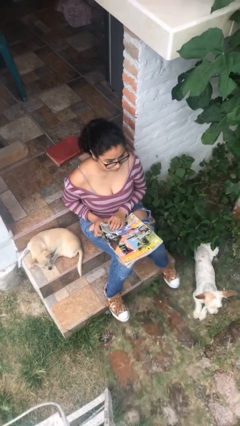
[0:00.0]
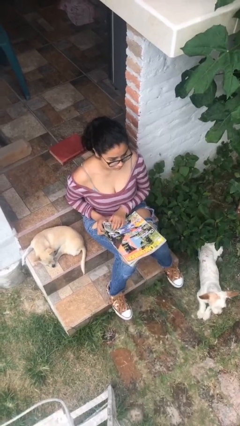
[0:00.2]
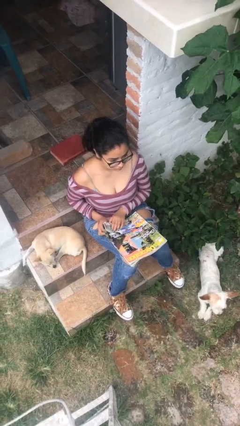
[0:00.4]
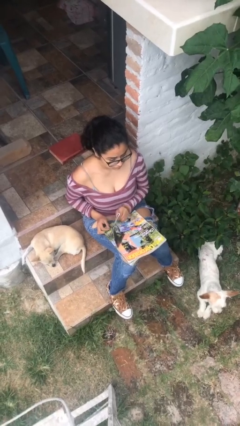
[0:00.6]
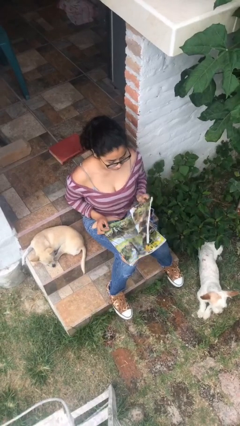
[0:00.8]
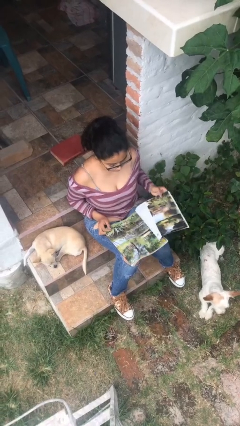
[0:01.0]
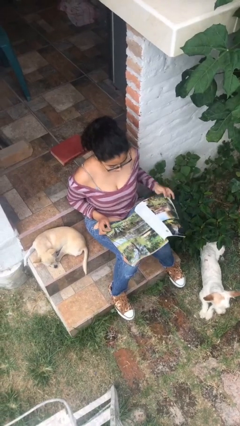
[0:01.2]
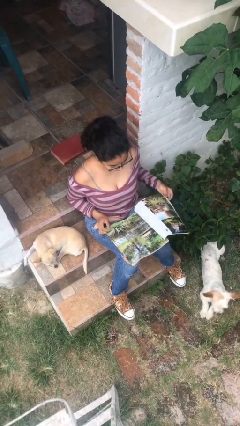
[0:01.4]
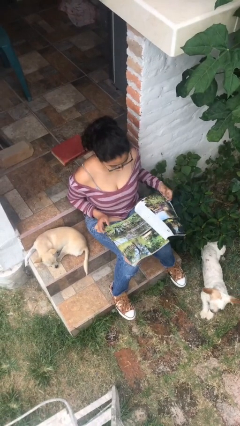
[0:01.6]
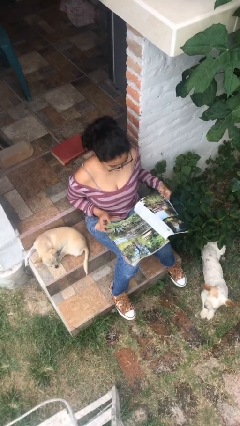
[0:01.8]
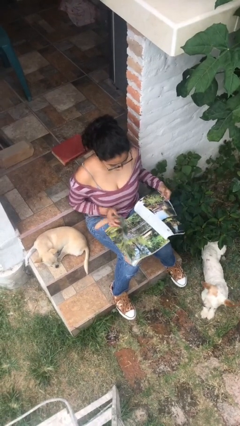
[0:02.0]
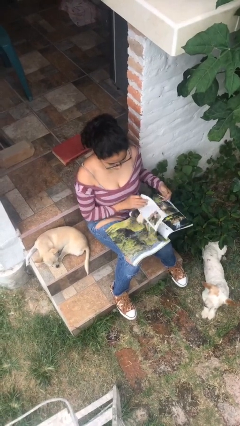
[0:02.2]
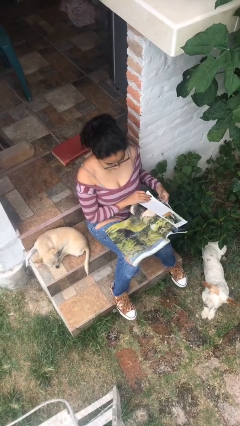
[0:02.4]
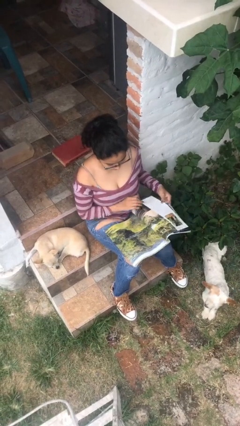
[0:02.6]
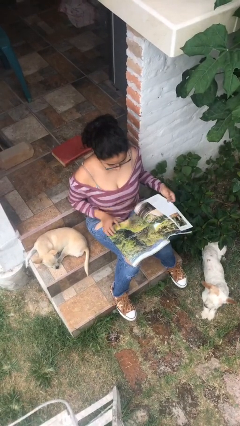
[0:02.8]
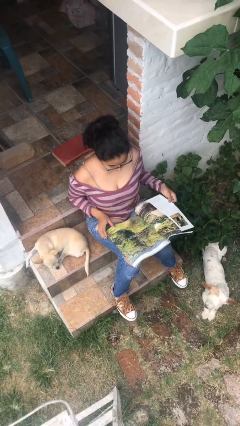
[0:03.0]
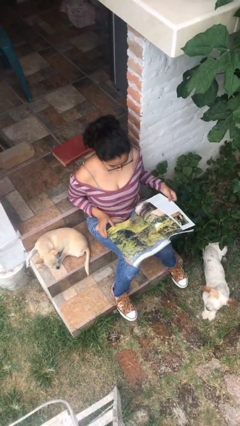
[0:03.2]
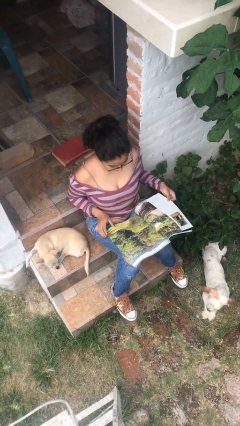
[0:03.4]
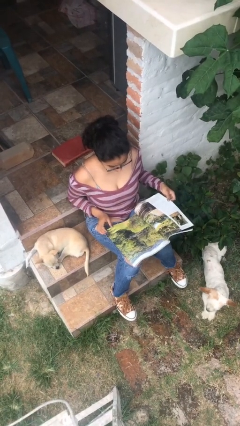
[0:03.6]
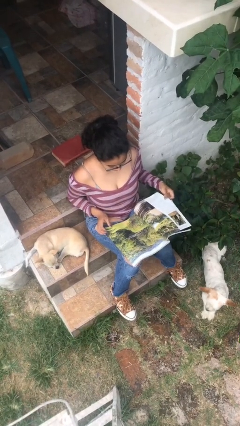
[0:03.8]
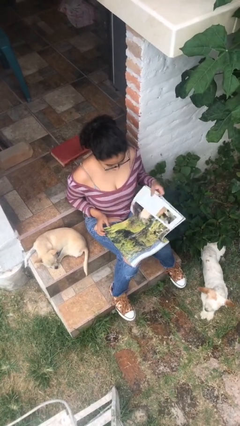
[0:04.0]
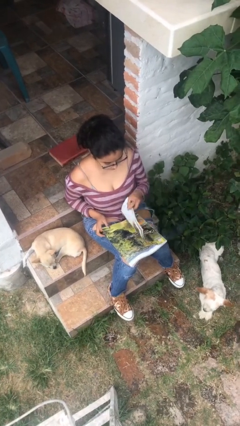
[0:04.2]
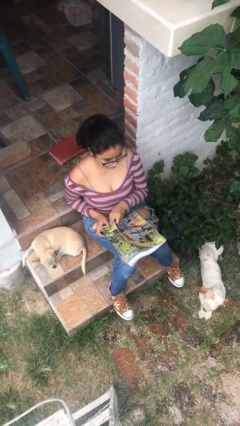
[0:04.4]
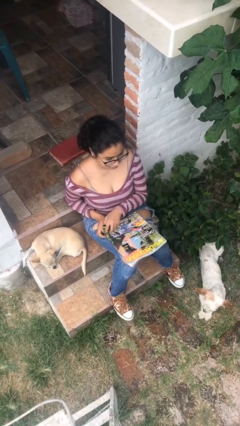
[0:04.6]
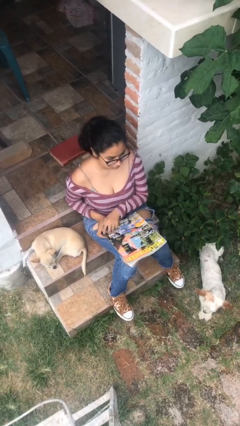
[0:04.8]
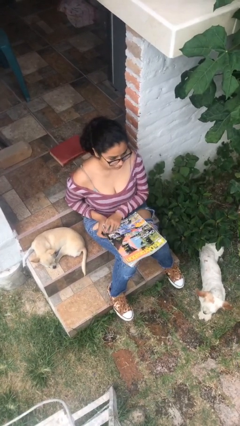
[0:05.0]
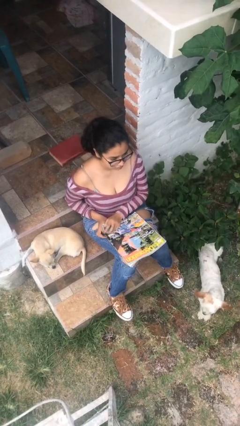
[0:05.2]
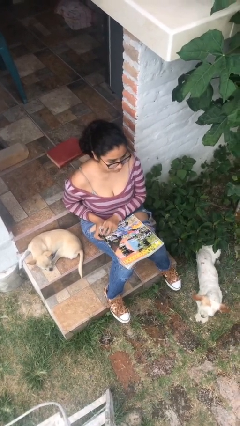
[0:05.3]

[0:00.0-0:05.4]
person reads magazine

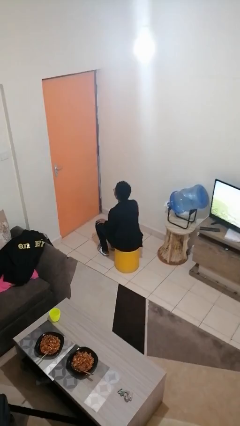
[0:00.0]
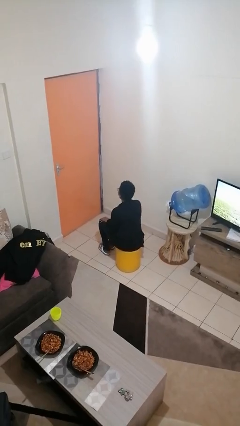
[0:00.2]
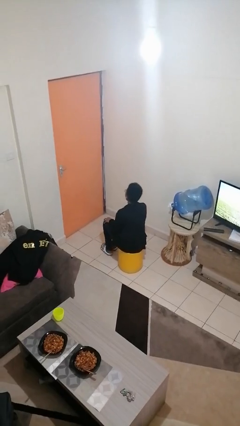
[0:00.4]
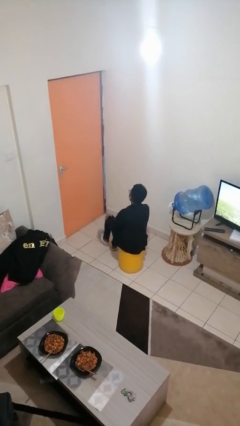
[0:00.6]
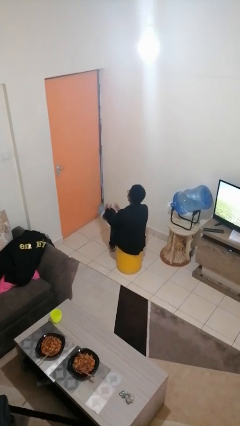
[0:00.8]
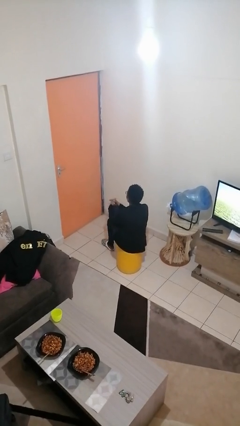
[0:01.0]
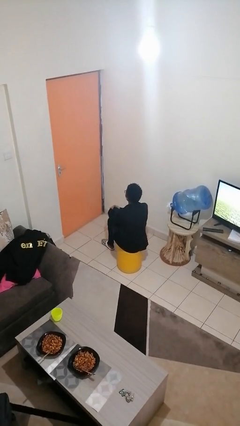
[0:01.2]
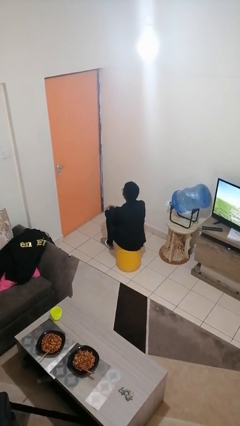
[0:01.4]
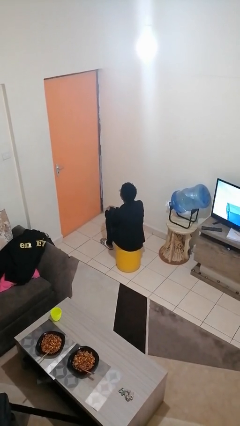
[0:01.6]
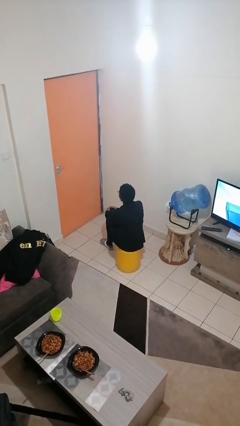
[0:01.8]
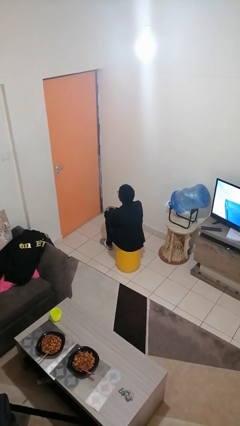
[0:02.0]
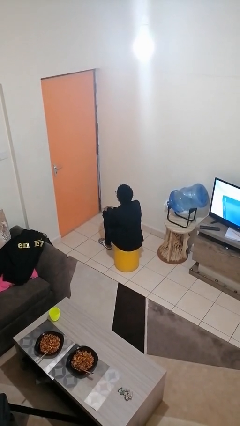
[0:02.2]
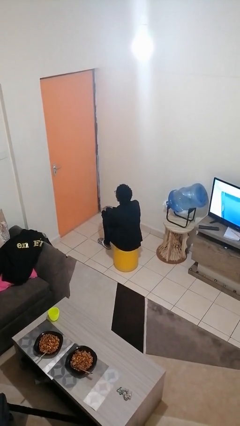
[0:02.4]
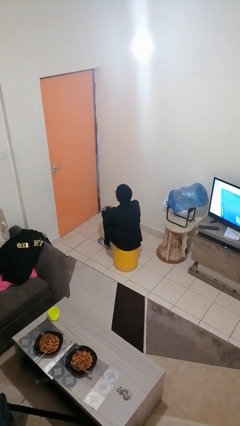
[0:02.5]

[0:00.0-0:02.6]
person crosses legs

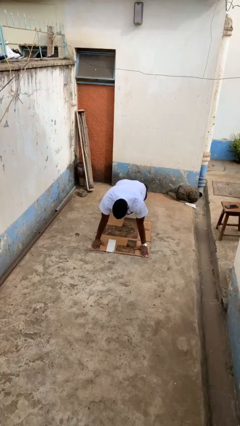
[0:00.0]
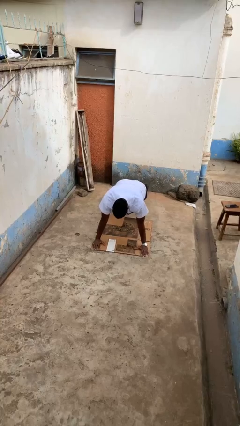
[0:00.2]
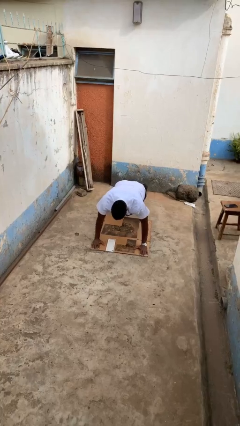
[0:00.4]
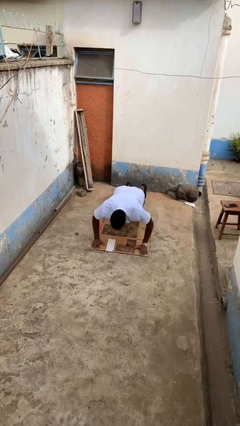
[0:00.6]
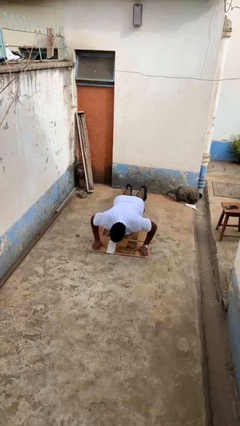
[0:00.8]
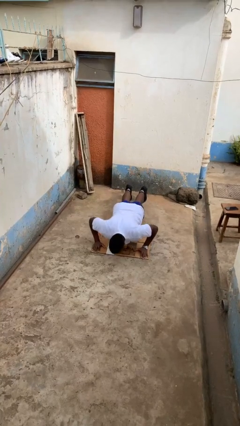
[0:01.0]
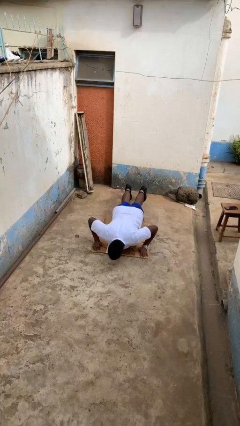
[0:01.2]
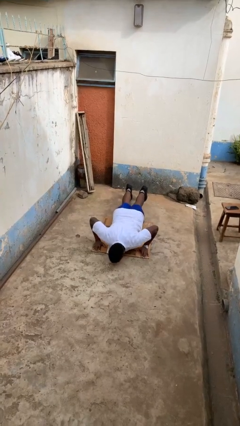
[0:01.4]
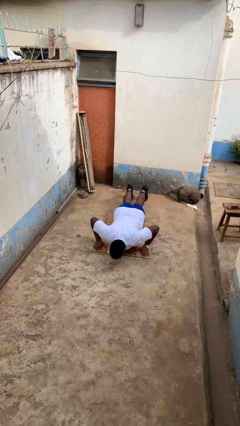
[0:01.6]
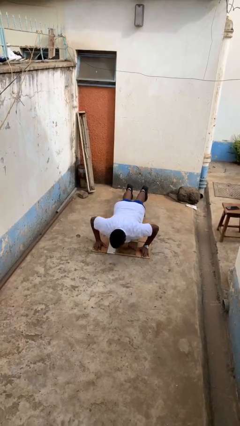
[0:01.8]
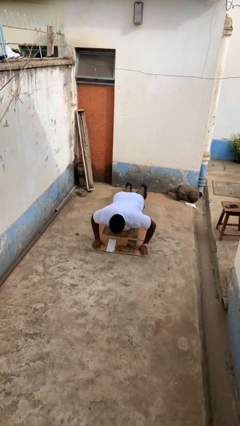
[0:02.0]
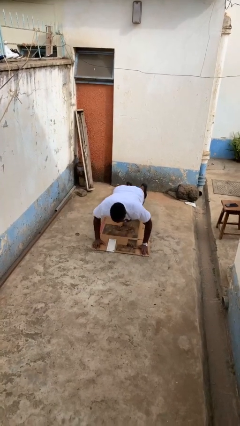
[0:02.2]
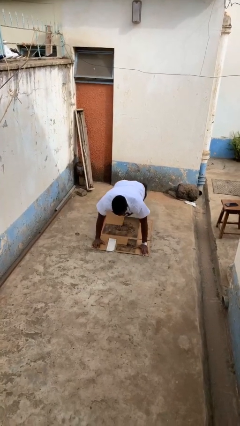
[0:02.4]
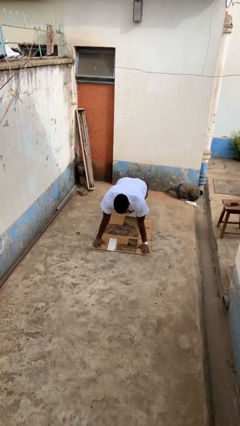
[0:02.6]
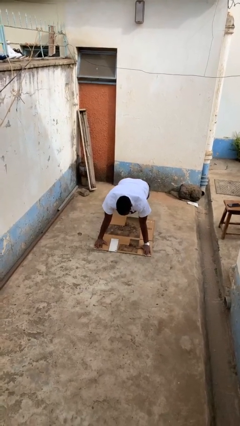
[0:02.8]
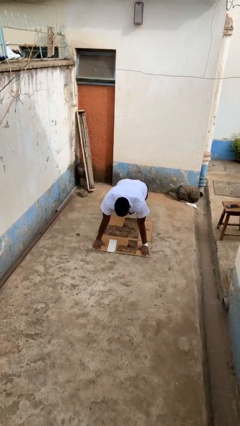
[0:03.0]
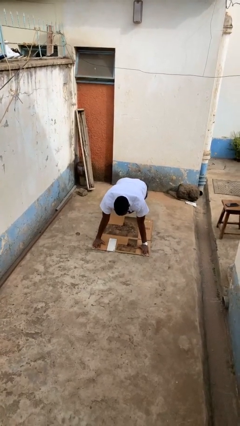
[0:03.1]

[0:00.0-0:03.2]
person exercises with pushup

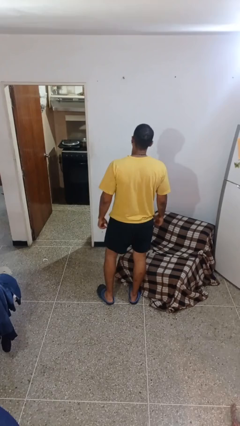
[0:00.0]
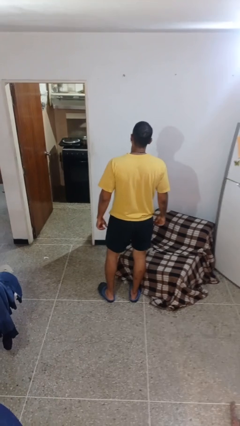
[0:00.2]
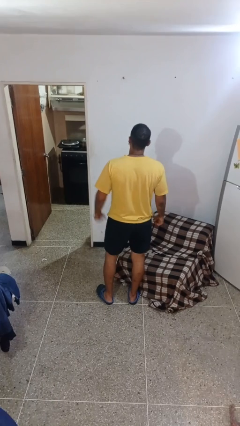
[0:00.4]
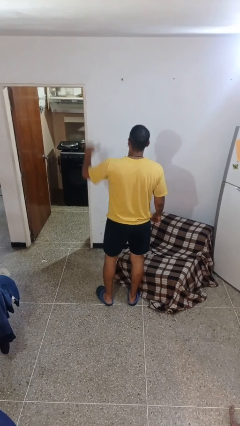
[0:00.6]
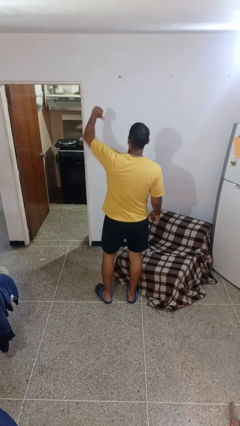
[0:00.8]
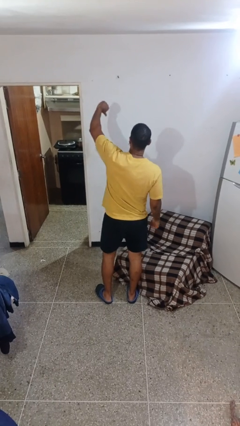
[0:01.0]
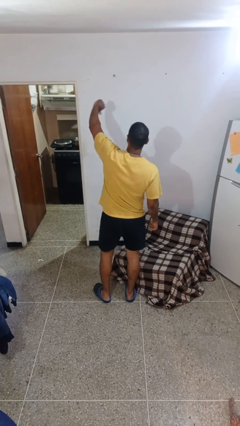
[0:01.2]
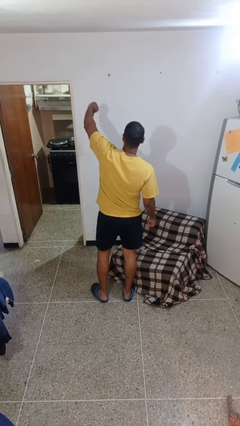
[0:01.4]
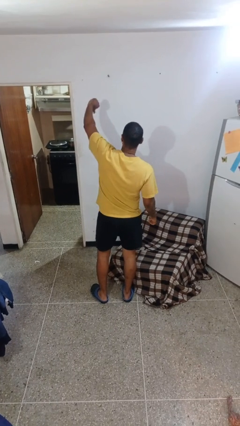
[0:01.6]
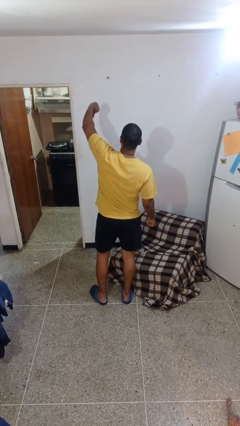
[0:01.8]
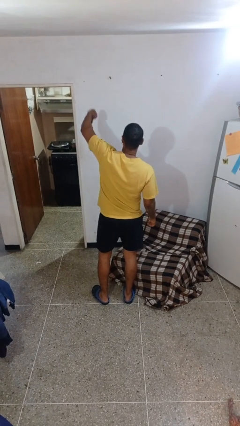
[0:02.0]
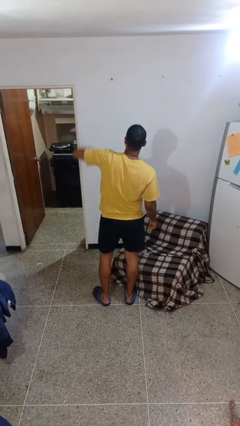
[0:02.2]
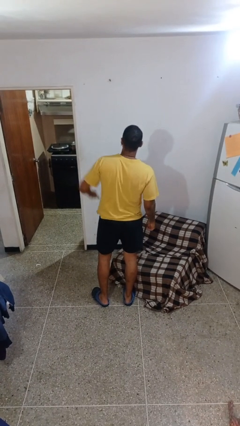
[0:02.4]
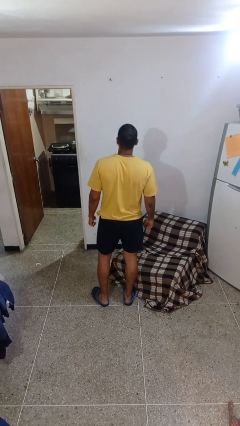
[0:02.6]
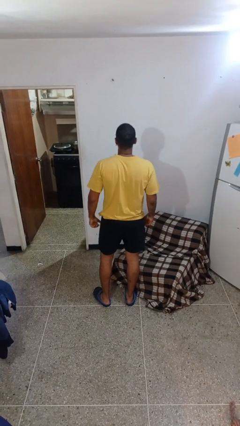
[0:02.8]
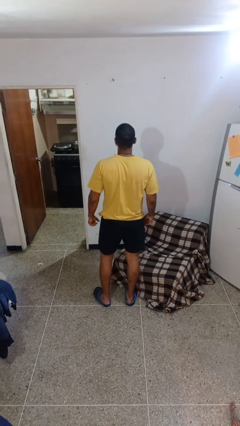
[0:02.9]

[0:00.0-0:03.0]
person gestures thumbs down

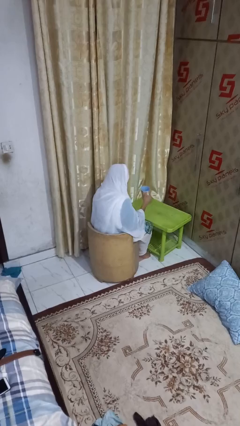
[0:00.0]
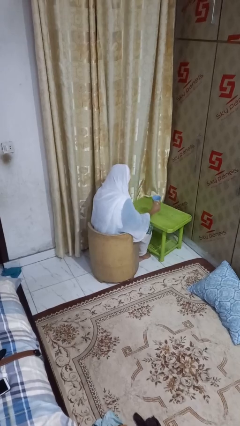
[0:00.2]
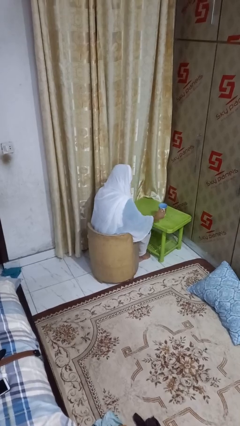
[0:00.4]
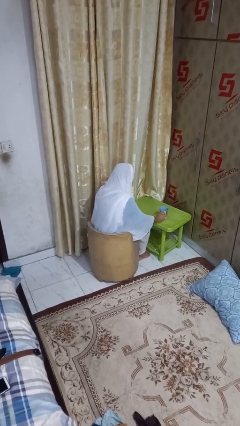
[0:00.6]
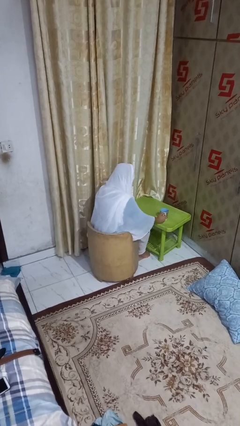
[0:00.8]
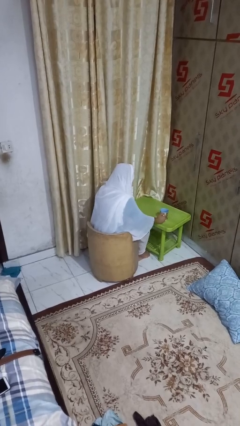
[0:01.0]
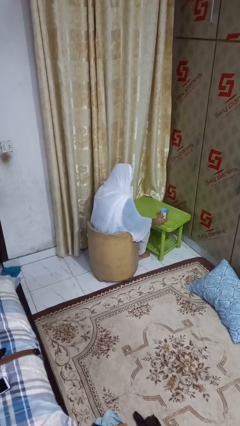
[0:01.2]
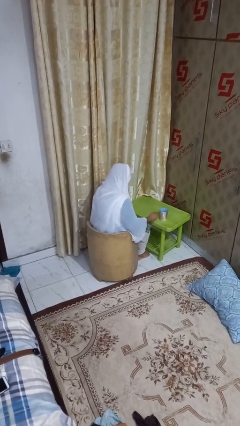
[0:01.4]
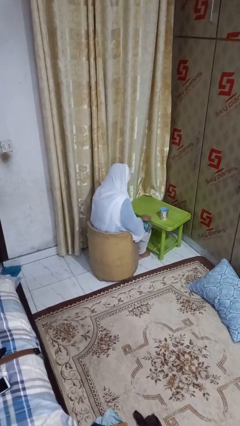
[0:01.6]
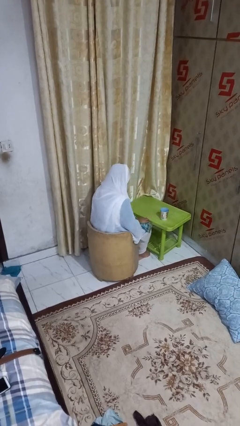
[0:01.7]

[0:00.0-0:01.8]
person puts down object on table

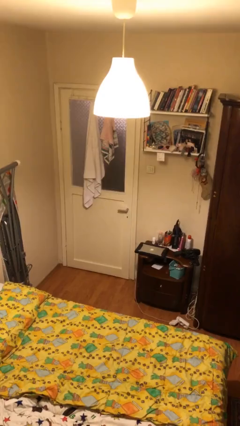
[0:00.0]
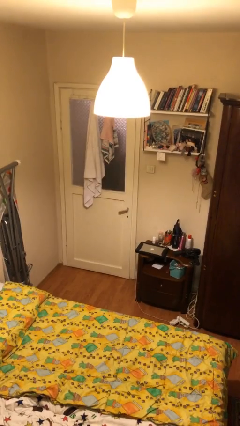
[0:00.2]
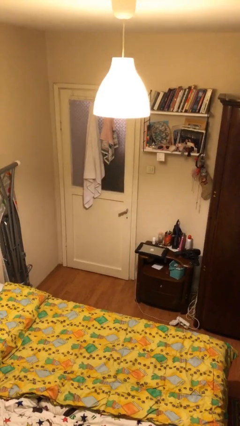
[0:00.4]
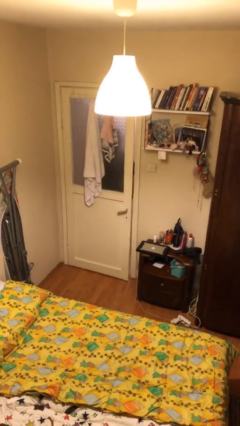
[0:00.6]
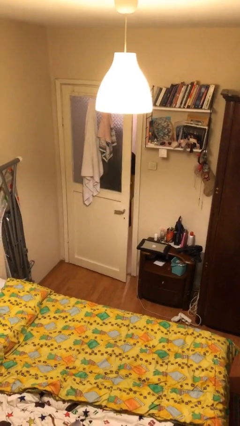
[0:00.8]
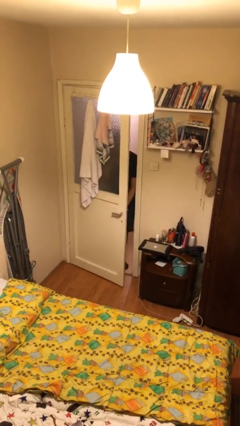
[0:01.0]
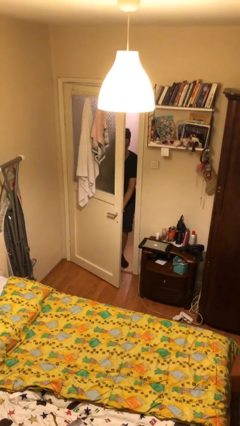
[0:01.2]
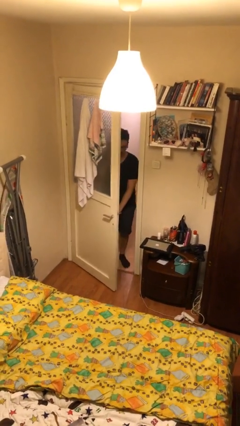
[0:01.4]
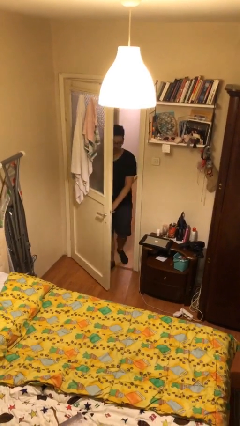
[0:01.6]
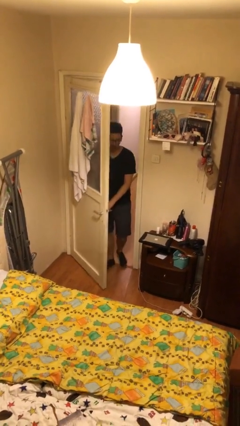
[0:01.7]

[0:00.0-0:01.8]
person opens facility door
